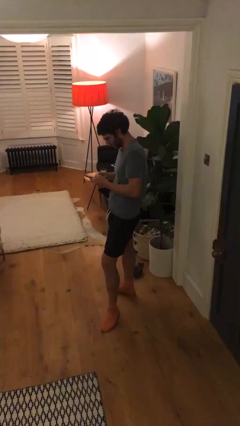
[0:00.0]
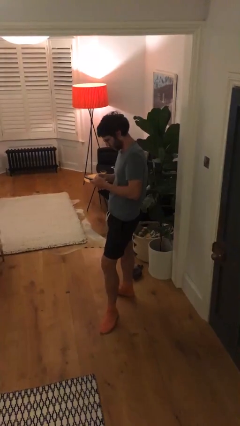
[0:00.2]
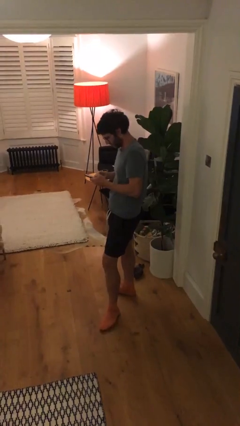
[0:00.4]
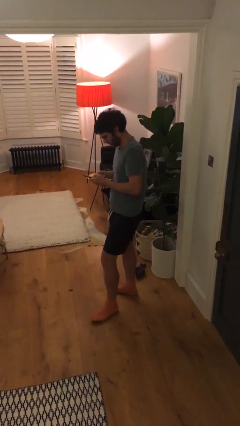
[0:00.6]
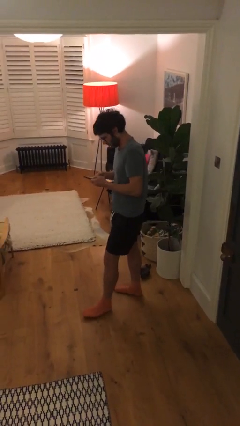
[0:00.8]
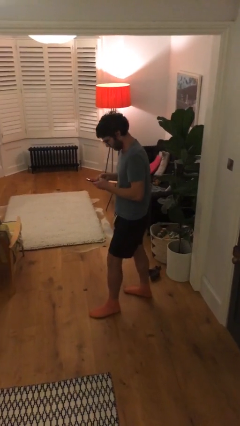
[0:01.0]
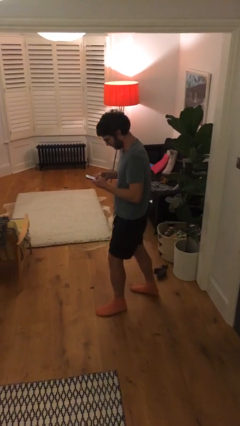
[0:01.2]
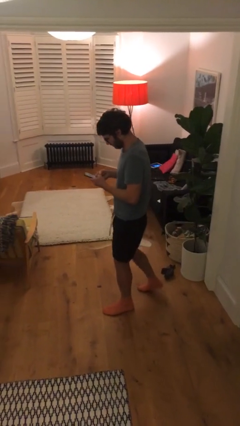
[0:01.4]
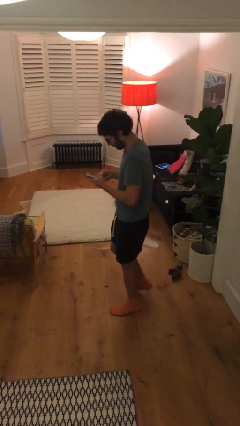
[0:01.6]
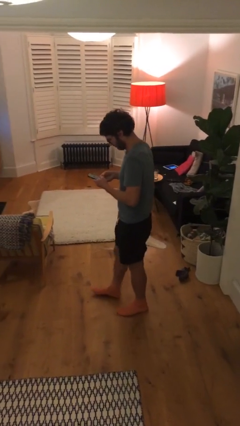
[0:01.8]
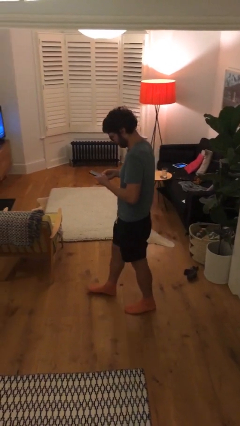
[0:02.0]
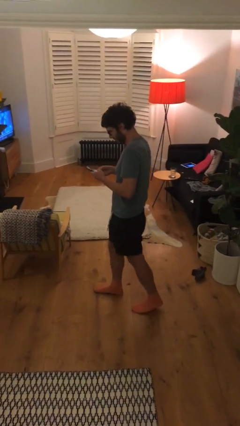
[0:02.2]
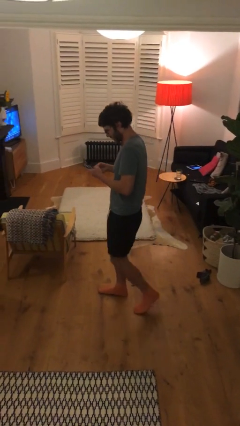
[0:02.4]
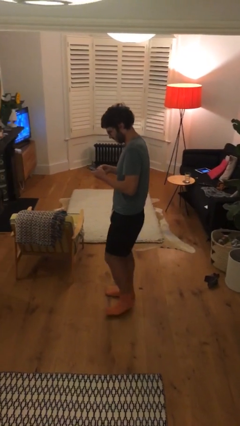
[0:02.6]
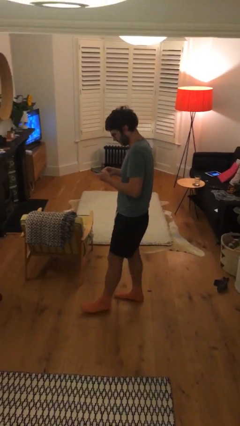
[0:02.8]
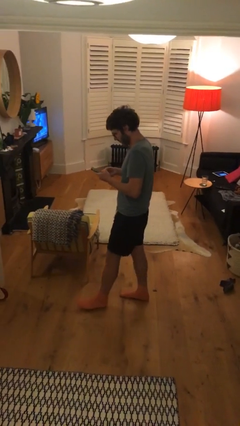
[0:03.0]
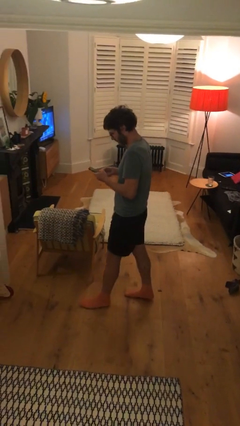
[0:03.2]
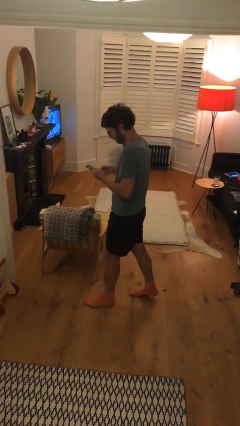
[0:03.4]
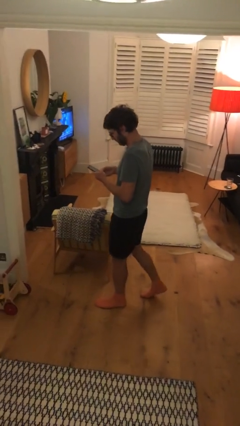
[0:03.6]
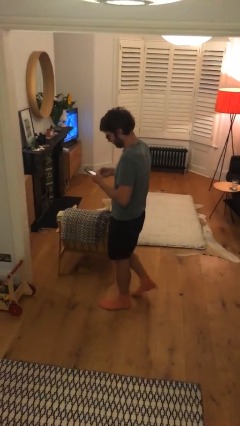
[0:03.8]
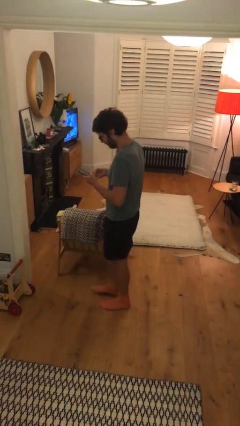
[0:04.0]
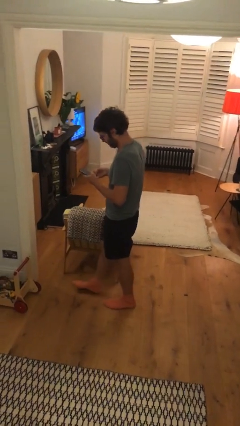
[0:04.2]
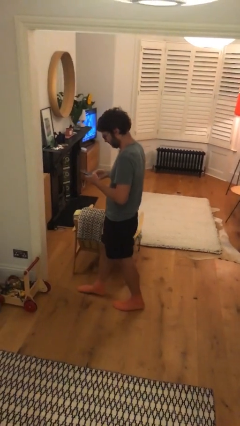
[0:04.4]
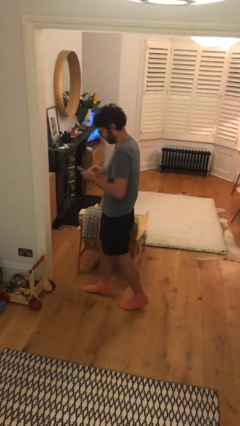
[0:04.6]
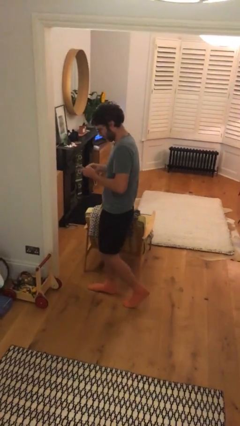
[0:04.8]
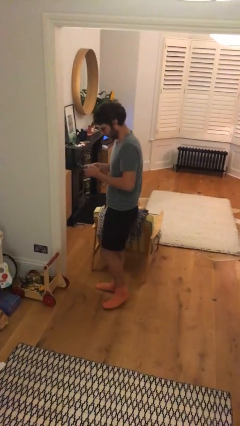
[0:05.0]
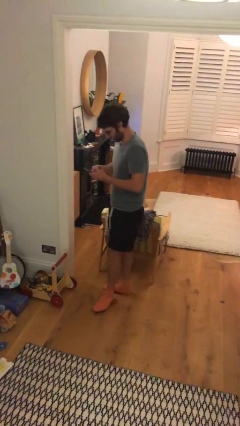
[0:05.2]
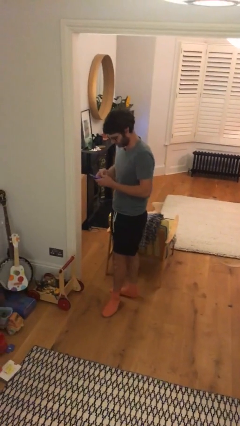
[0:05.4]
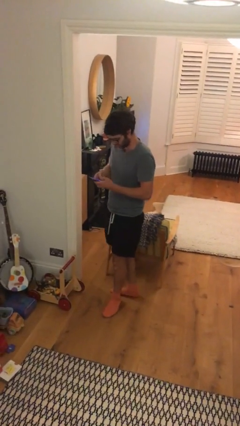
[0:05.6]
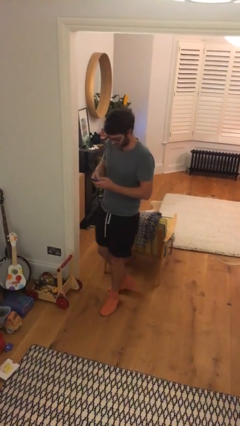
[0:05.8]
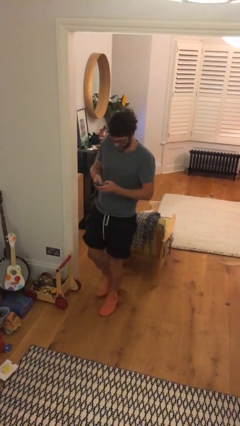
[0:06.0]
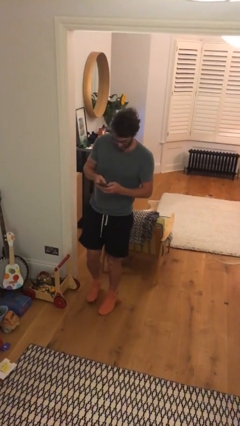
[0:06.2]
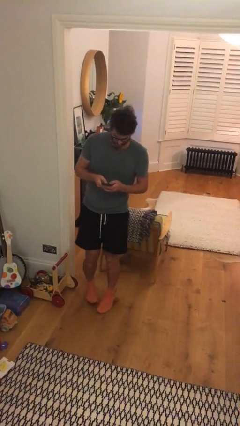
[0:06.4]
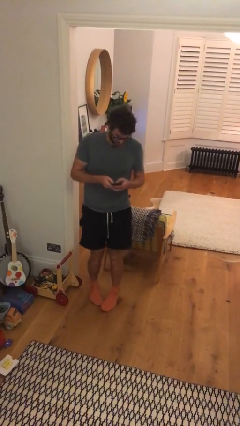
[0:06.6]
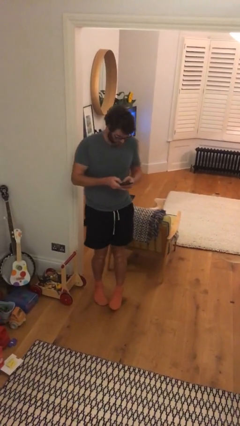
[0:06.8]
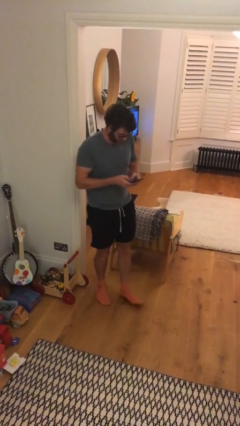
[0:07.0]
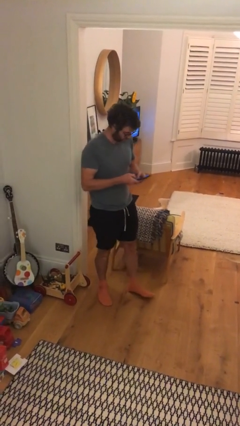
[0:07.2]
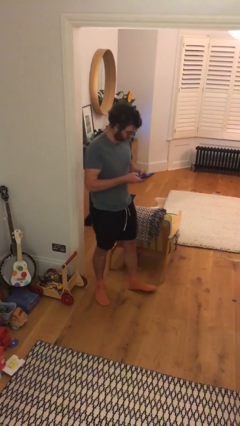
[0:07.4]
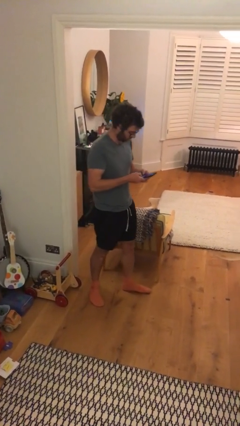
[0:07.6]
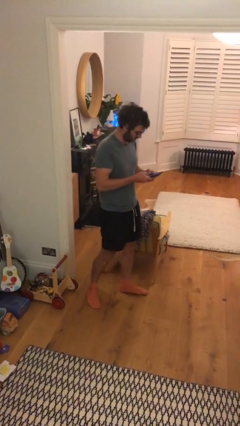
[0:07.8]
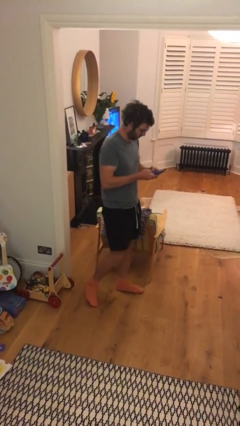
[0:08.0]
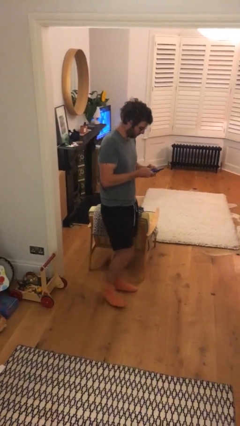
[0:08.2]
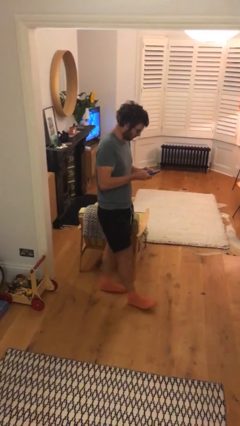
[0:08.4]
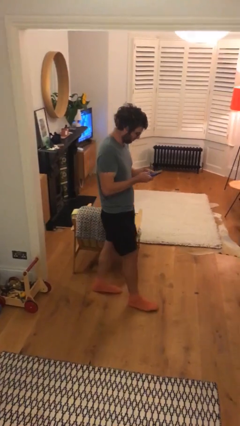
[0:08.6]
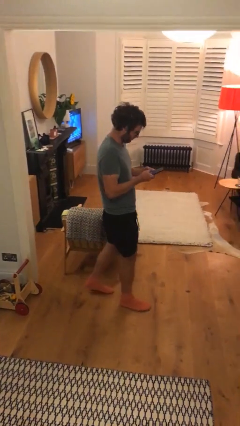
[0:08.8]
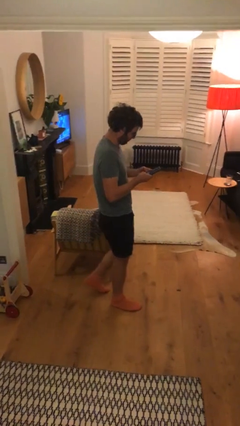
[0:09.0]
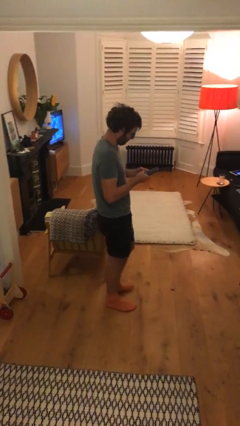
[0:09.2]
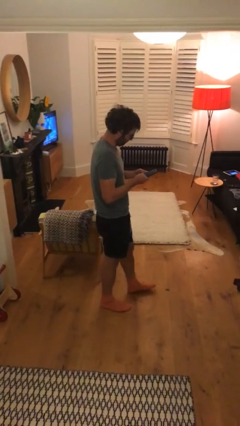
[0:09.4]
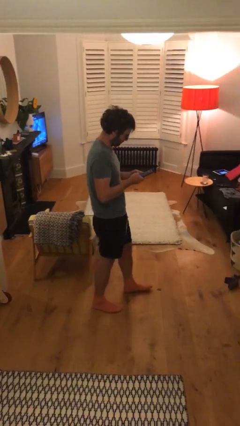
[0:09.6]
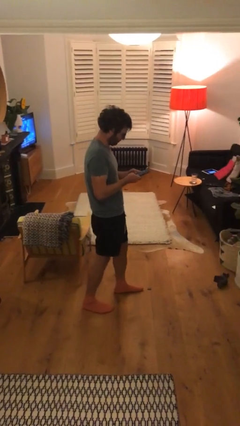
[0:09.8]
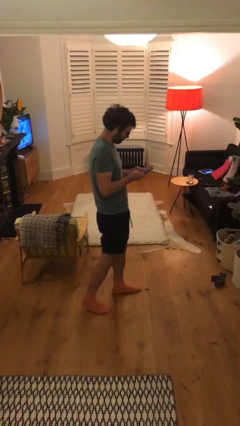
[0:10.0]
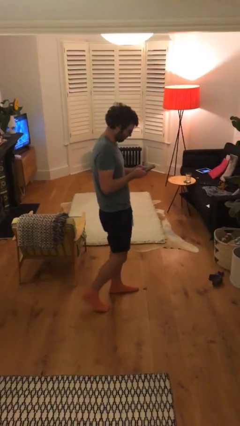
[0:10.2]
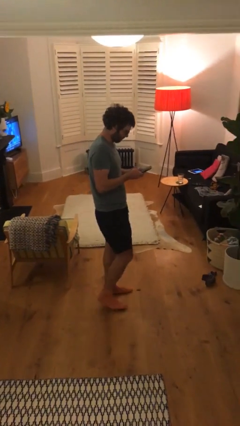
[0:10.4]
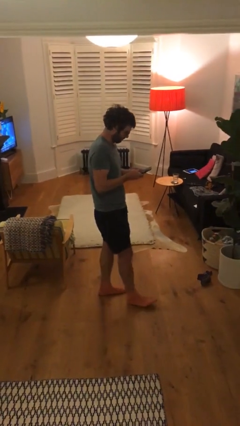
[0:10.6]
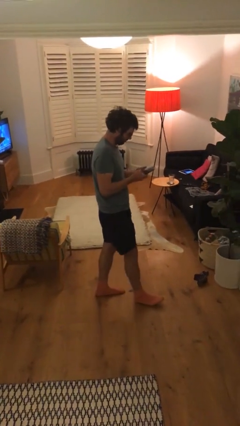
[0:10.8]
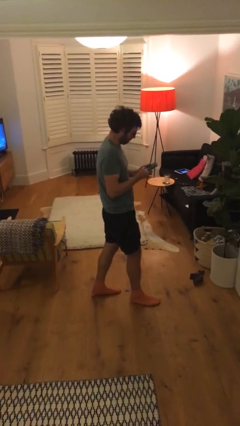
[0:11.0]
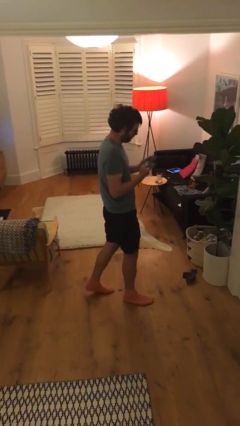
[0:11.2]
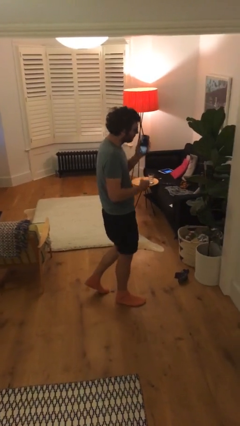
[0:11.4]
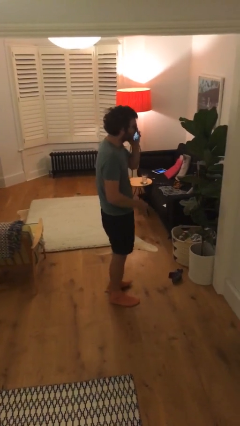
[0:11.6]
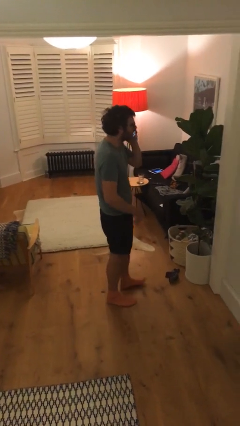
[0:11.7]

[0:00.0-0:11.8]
person texts on phone

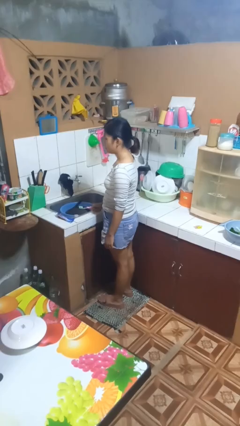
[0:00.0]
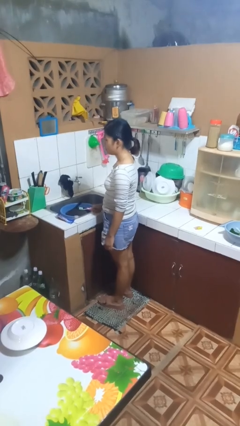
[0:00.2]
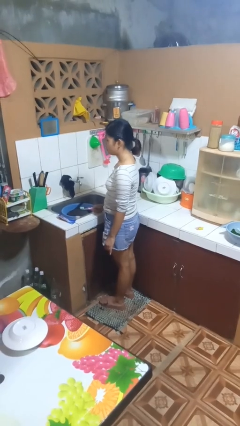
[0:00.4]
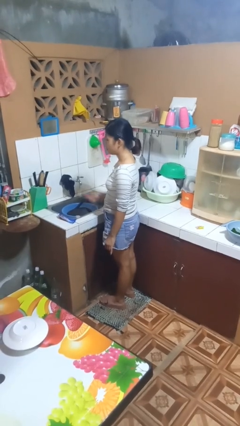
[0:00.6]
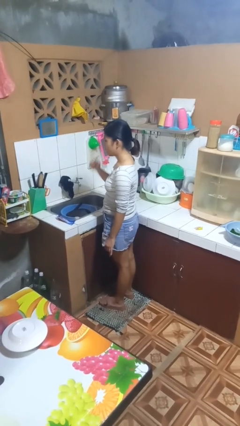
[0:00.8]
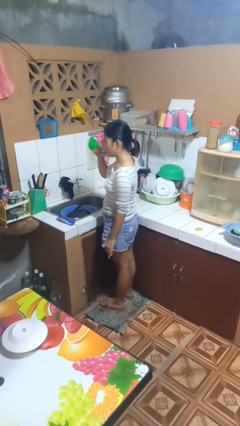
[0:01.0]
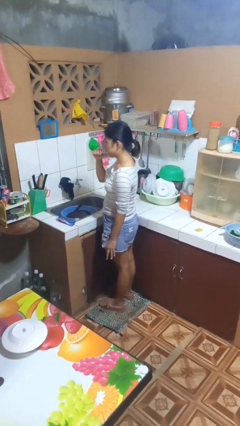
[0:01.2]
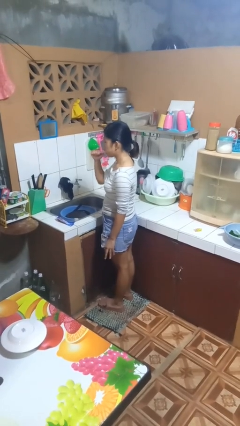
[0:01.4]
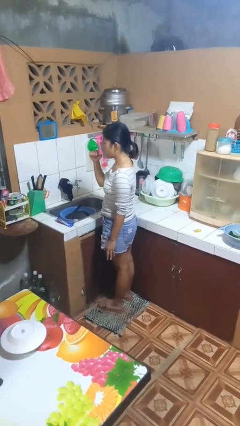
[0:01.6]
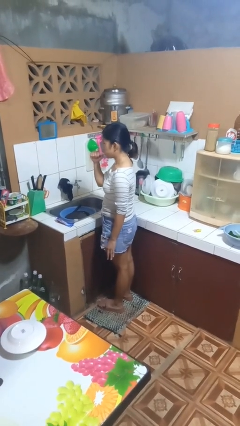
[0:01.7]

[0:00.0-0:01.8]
person brushes teeth

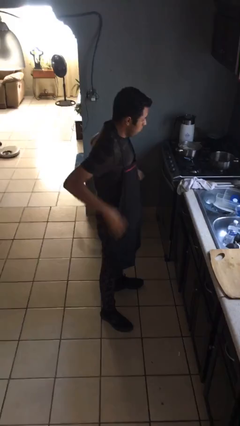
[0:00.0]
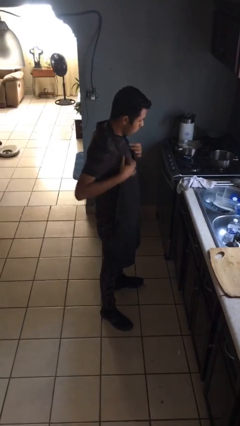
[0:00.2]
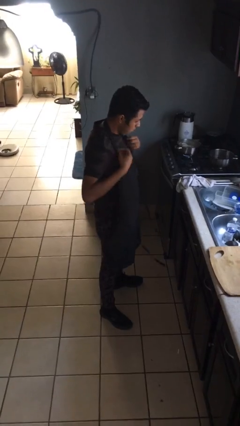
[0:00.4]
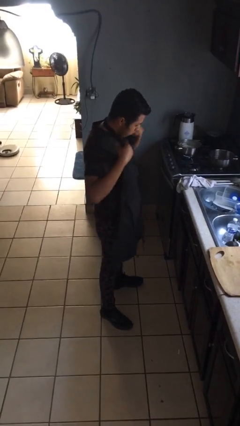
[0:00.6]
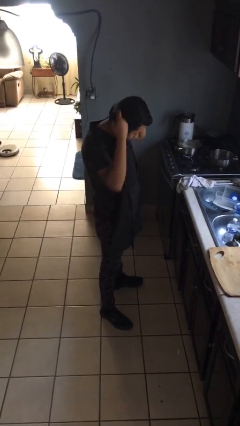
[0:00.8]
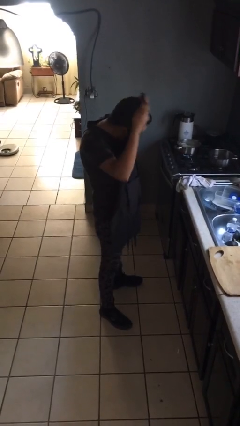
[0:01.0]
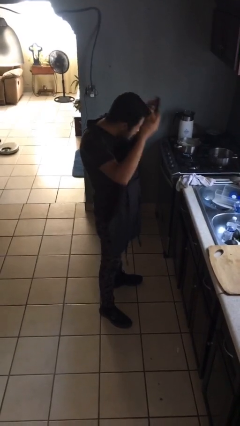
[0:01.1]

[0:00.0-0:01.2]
person takes off apron

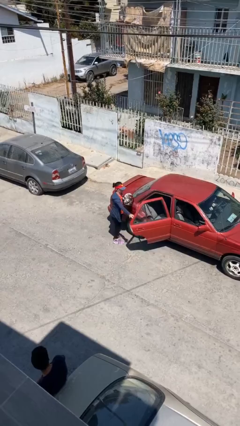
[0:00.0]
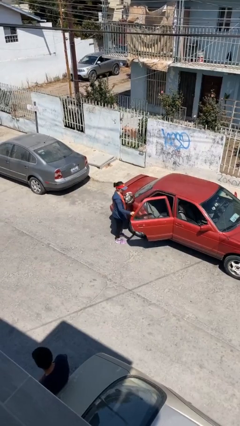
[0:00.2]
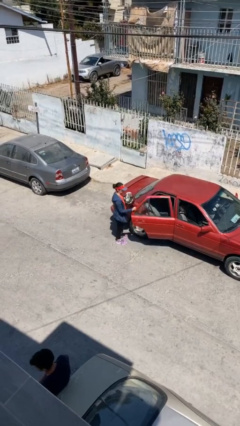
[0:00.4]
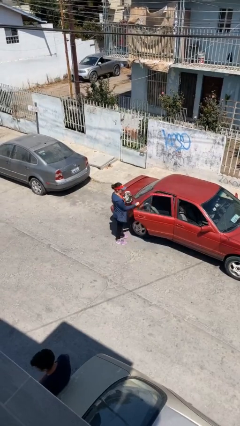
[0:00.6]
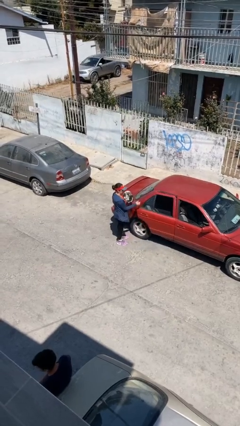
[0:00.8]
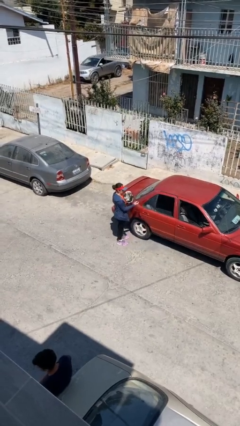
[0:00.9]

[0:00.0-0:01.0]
person closes car door

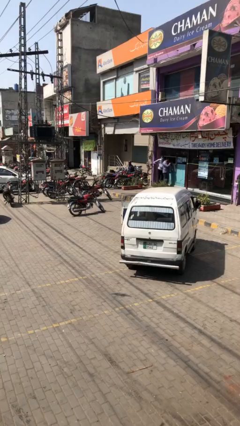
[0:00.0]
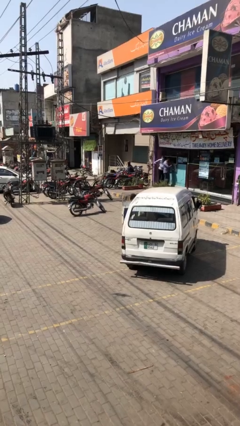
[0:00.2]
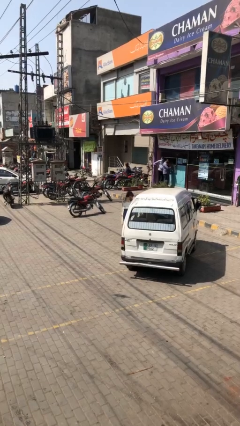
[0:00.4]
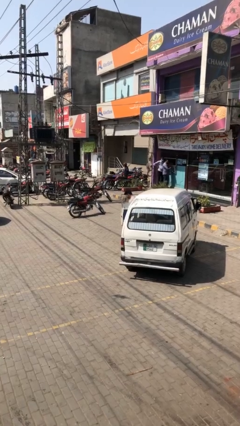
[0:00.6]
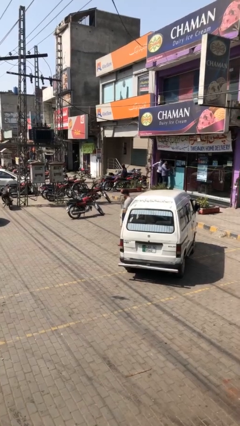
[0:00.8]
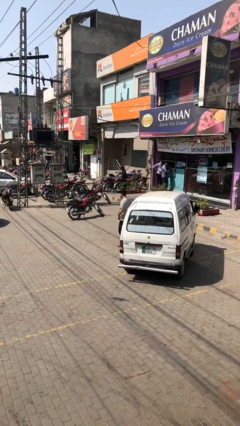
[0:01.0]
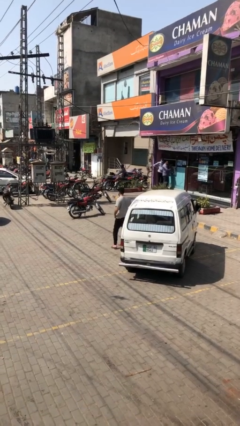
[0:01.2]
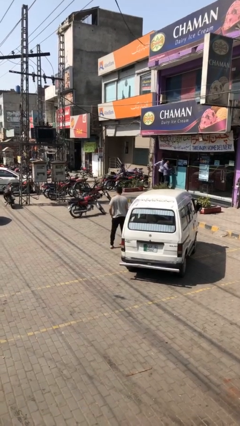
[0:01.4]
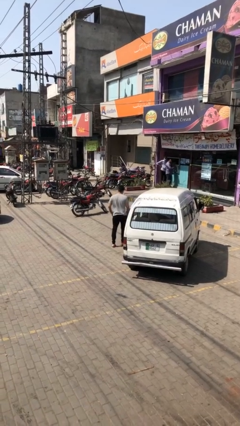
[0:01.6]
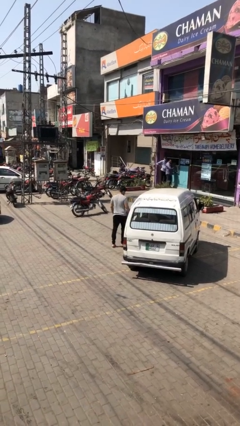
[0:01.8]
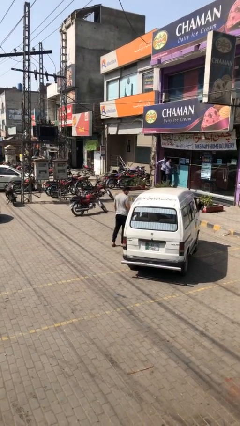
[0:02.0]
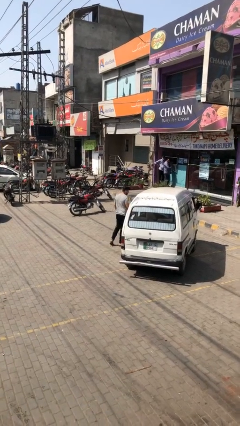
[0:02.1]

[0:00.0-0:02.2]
person exits car
